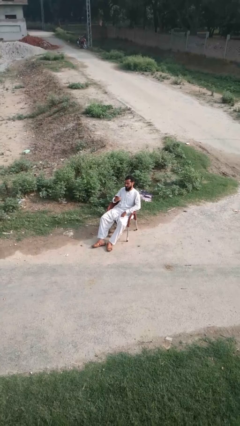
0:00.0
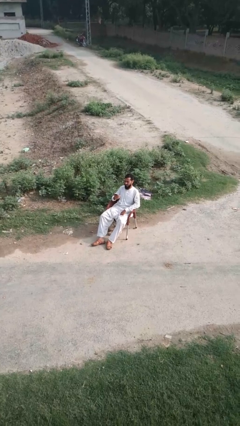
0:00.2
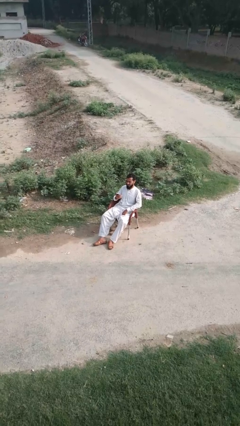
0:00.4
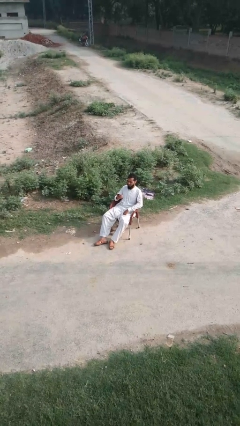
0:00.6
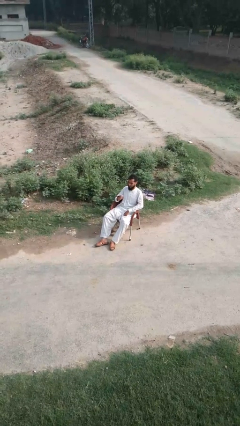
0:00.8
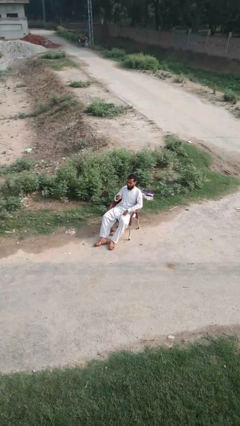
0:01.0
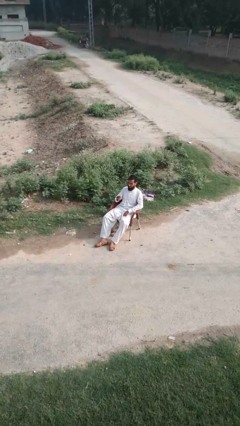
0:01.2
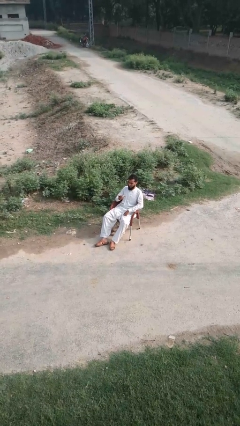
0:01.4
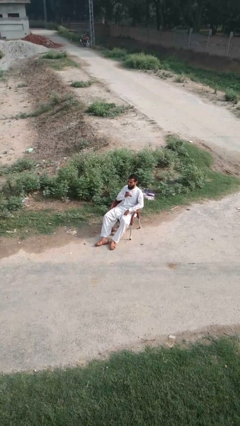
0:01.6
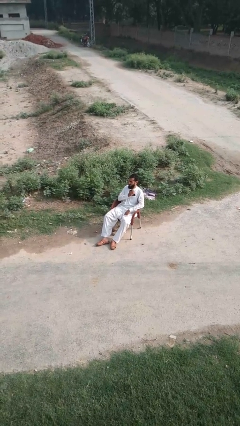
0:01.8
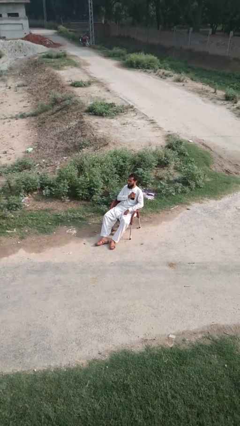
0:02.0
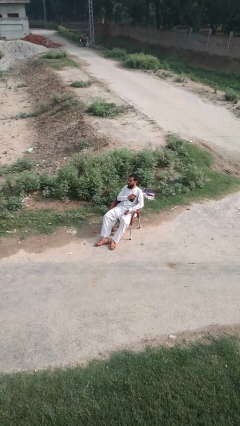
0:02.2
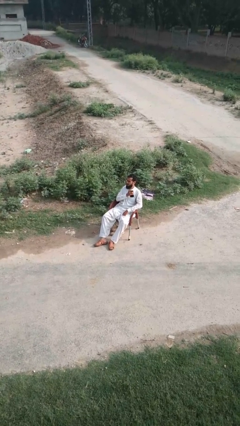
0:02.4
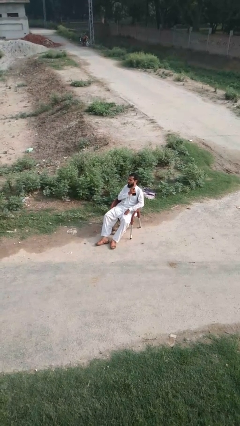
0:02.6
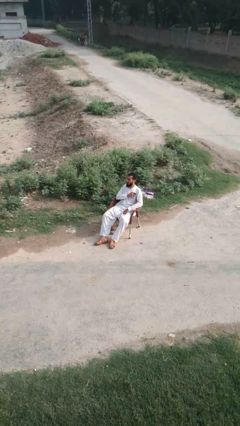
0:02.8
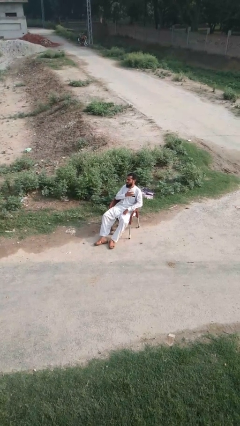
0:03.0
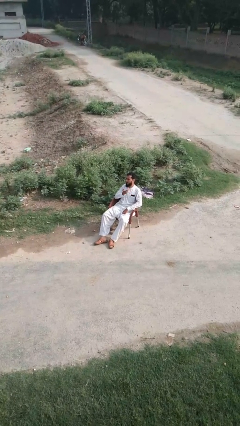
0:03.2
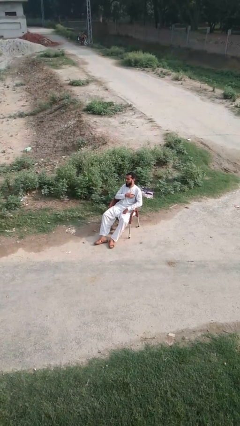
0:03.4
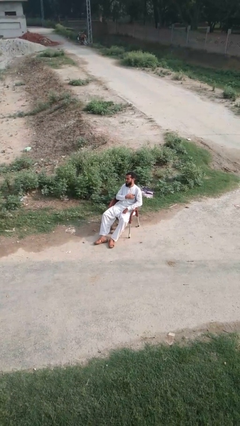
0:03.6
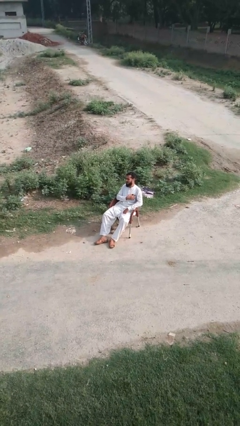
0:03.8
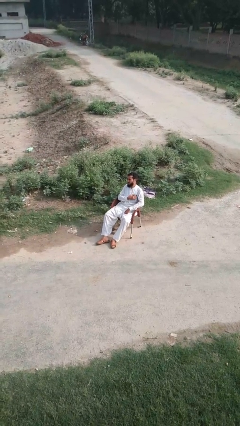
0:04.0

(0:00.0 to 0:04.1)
person takes phone from pocket

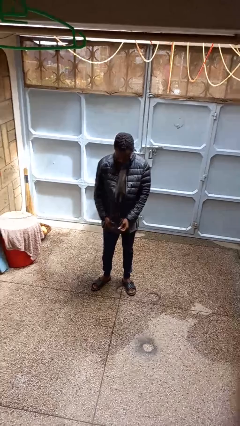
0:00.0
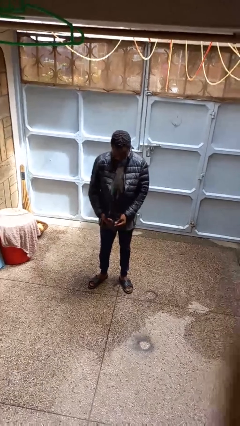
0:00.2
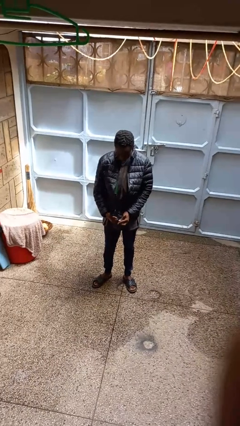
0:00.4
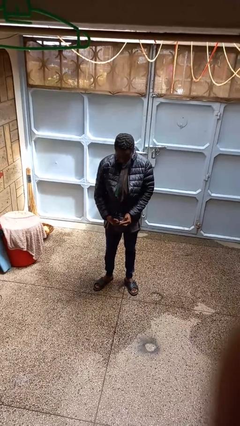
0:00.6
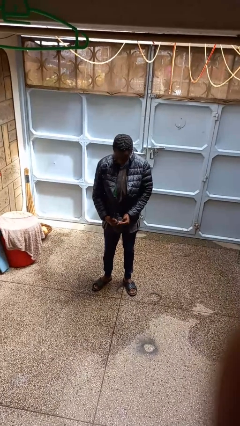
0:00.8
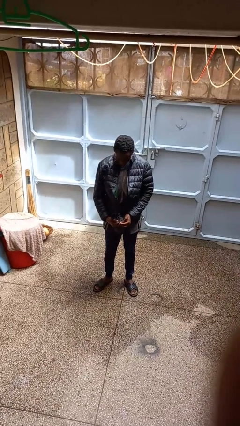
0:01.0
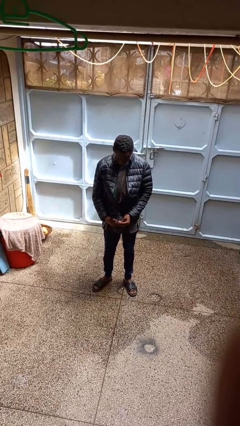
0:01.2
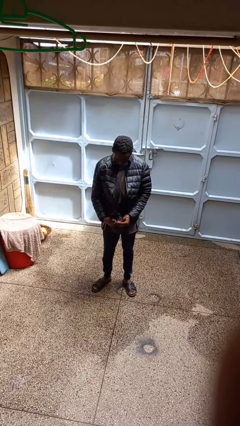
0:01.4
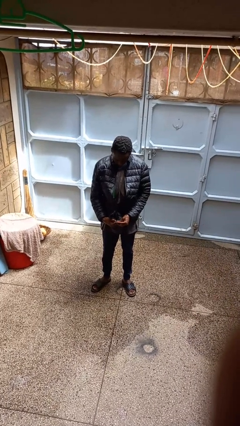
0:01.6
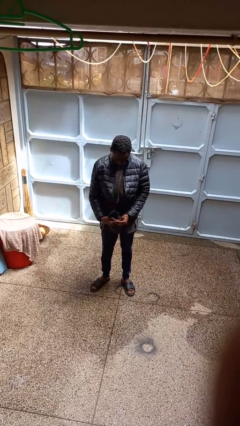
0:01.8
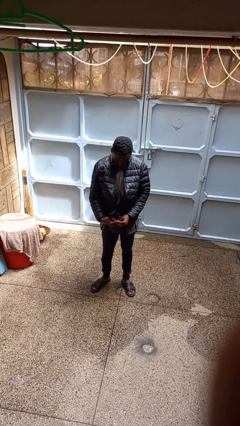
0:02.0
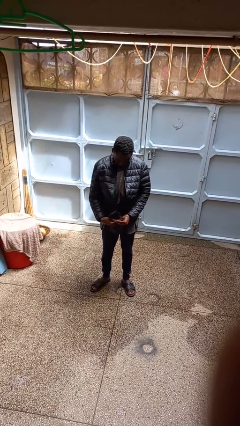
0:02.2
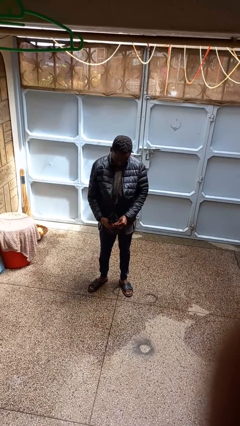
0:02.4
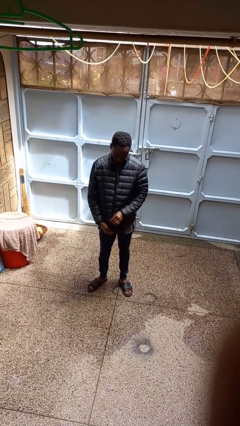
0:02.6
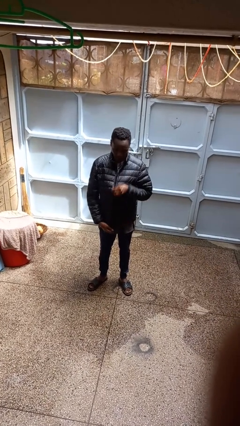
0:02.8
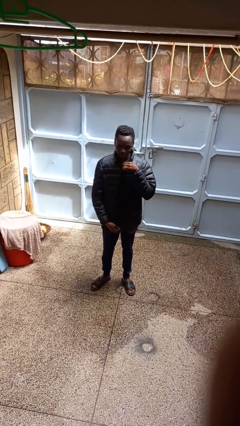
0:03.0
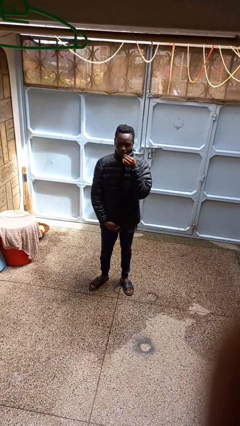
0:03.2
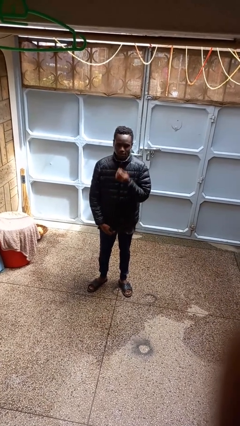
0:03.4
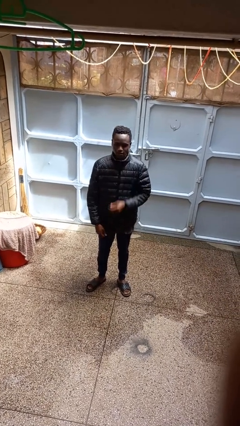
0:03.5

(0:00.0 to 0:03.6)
person zips up jacket

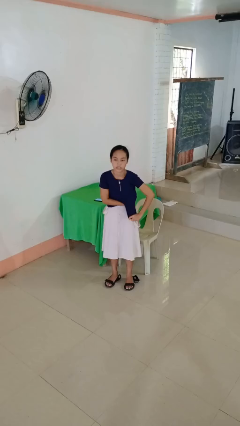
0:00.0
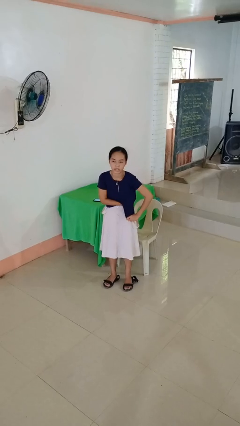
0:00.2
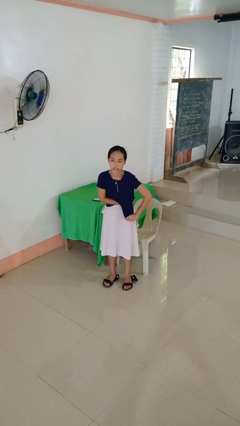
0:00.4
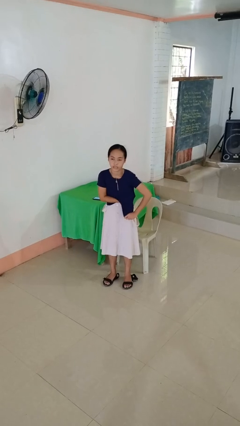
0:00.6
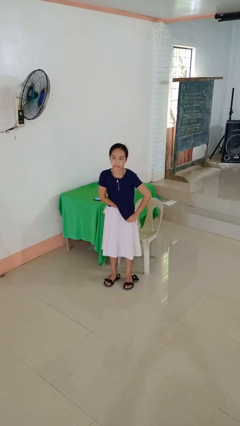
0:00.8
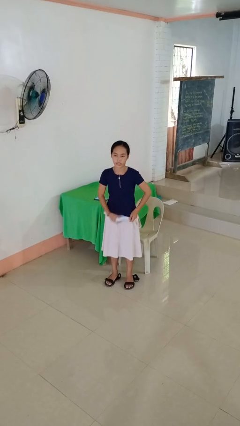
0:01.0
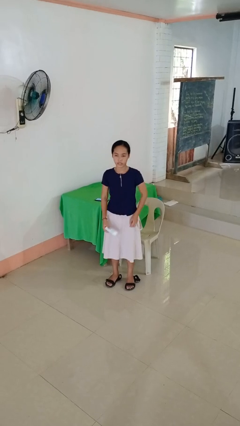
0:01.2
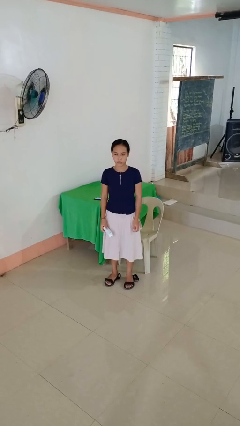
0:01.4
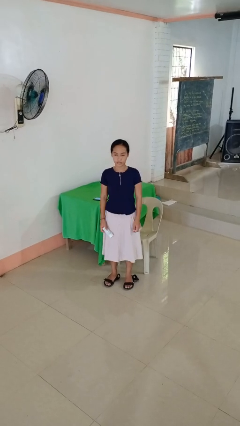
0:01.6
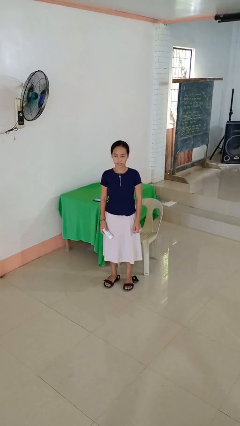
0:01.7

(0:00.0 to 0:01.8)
person applies deodorant

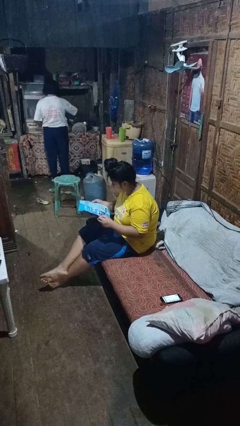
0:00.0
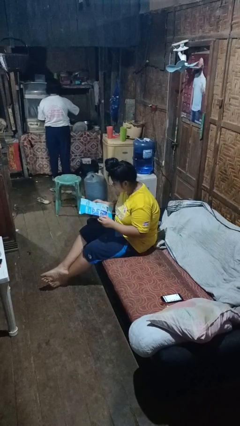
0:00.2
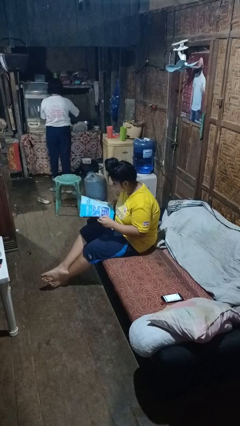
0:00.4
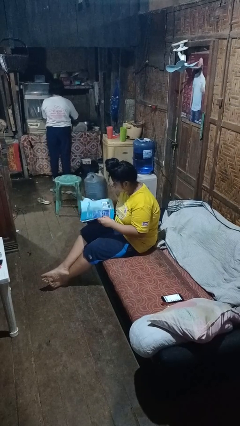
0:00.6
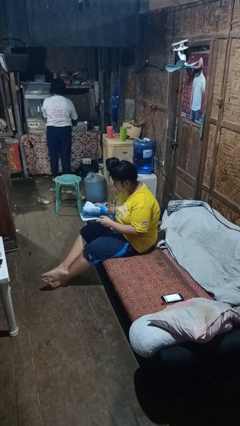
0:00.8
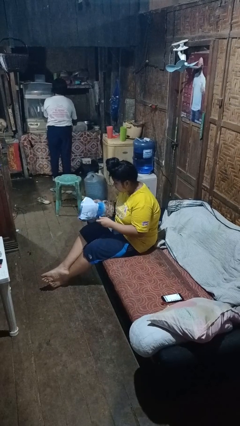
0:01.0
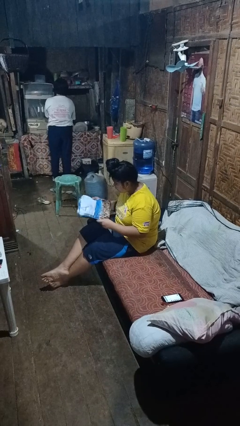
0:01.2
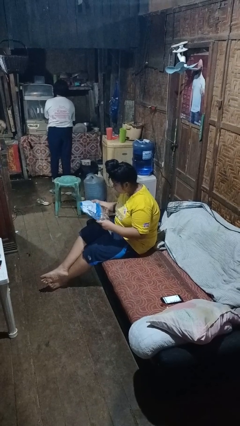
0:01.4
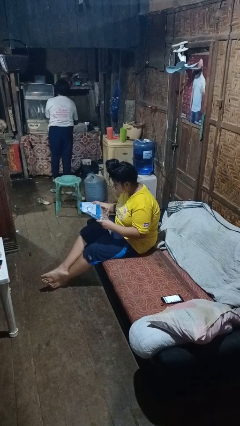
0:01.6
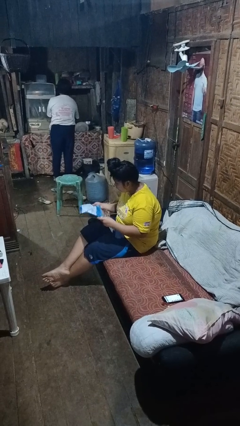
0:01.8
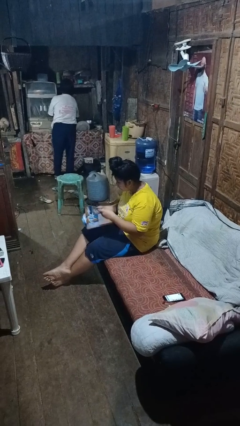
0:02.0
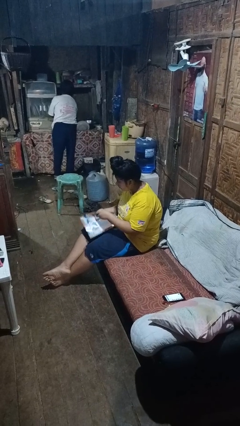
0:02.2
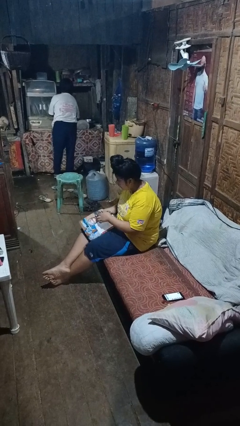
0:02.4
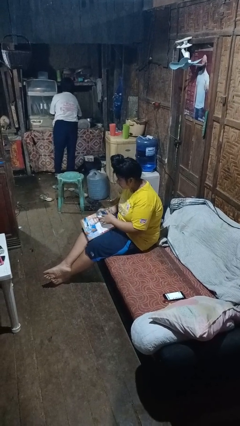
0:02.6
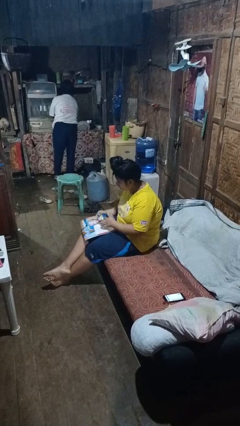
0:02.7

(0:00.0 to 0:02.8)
person reads magazine

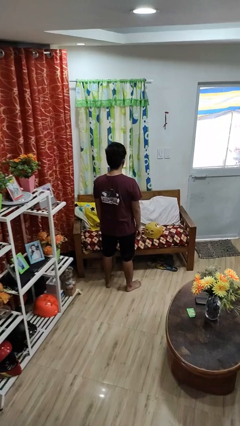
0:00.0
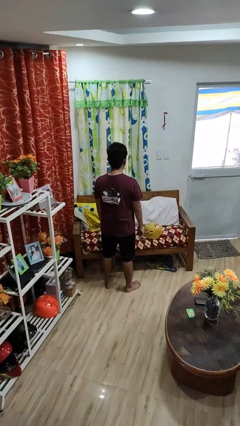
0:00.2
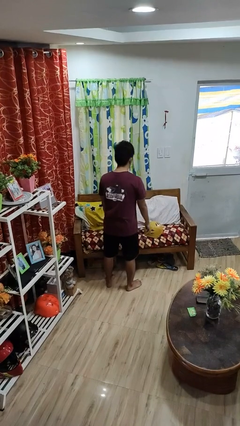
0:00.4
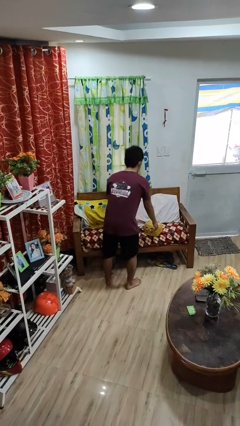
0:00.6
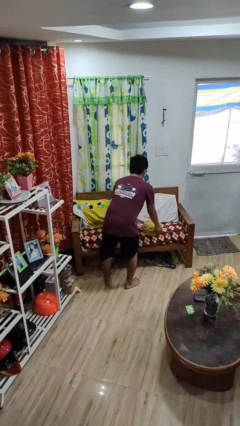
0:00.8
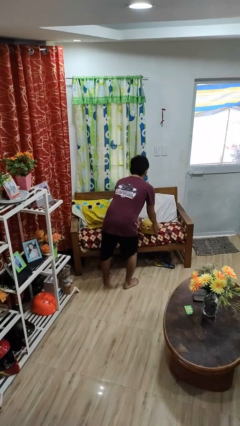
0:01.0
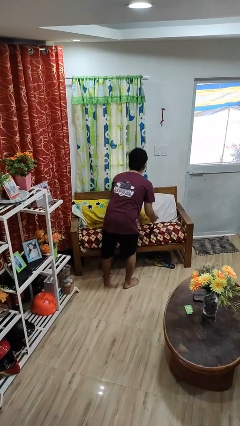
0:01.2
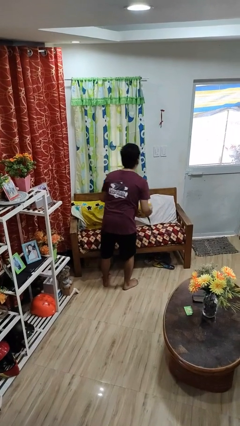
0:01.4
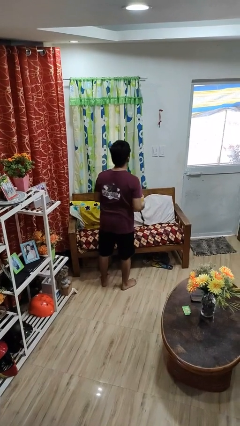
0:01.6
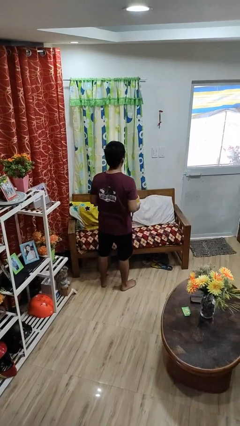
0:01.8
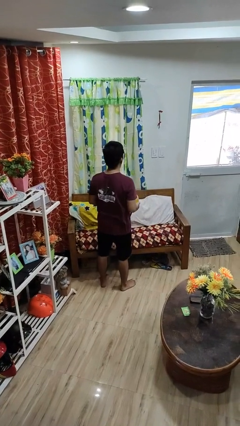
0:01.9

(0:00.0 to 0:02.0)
person picks up object from couch

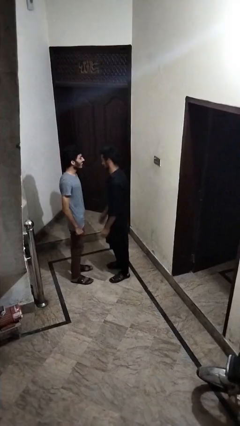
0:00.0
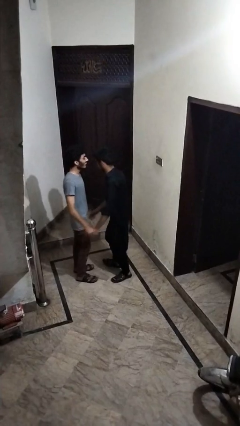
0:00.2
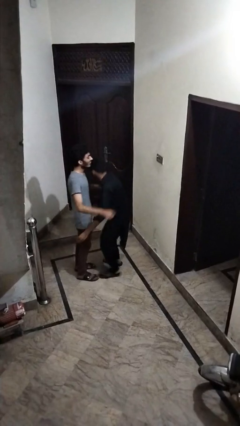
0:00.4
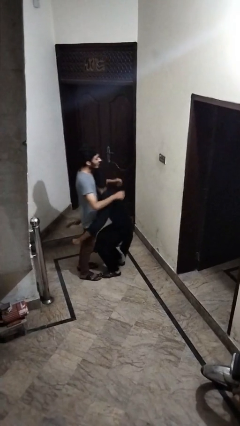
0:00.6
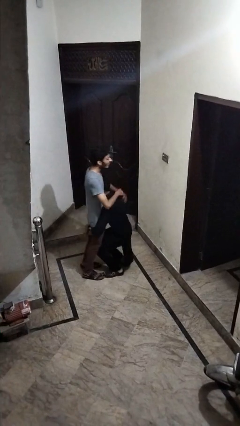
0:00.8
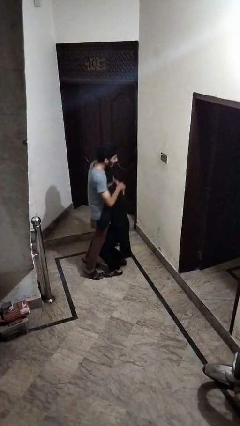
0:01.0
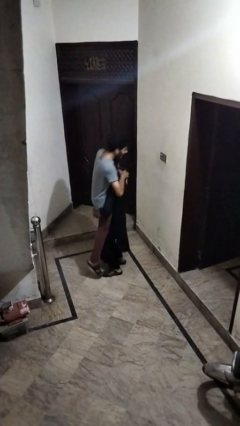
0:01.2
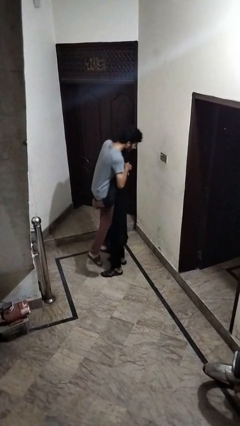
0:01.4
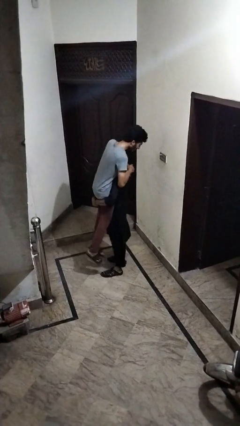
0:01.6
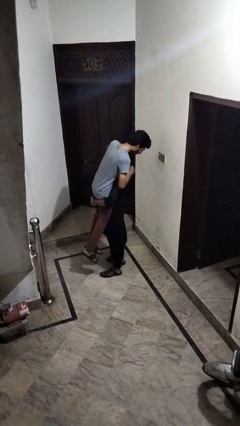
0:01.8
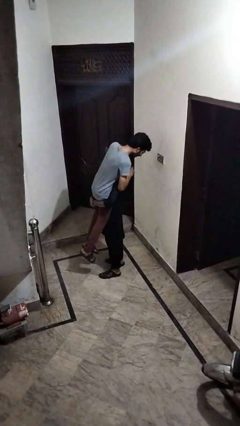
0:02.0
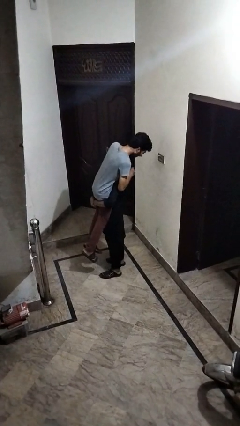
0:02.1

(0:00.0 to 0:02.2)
person picks up person

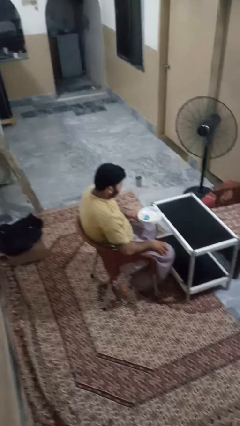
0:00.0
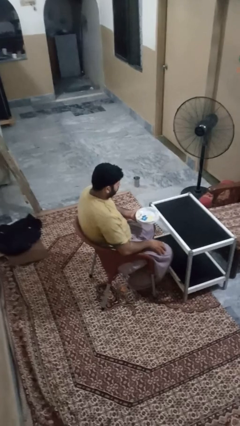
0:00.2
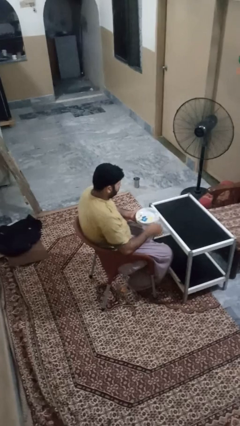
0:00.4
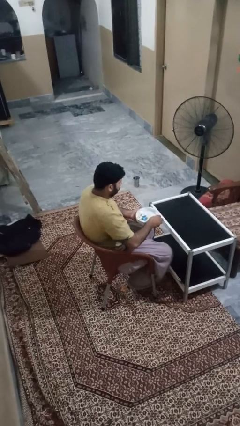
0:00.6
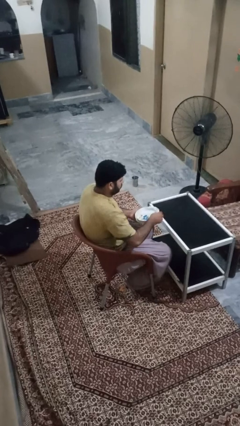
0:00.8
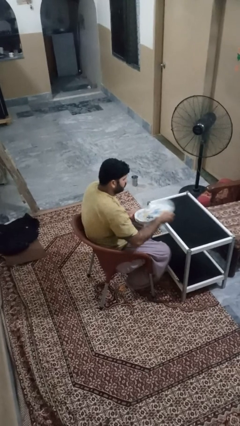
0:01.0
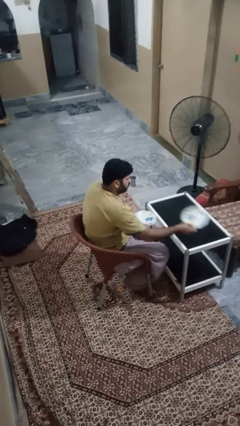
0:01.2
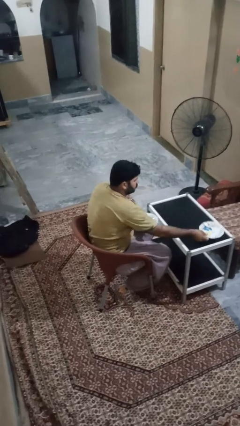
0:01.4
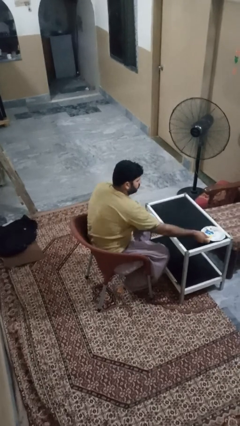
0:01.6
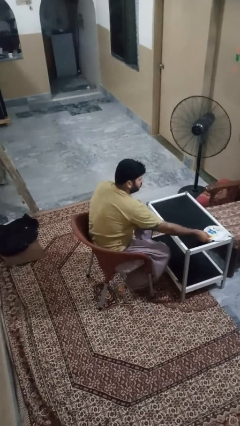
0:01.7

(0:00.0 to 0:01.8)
person sets table
